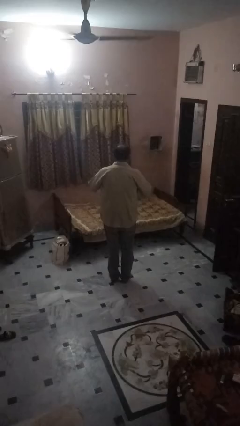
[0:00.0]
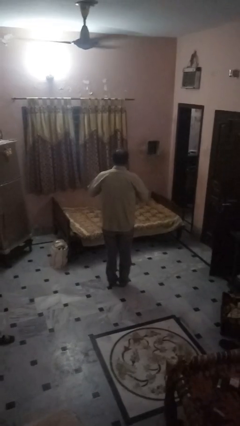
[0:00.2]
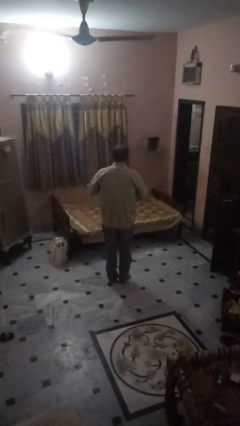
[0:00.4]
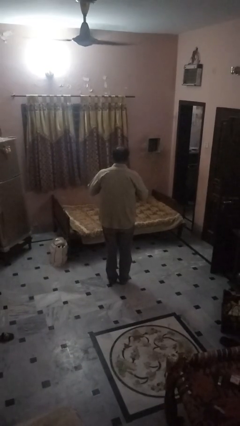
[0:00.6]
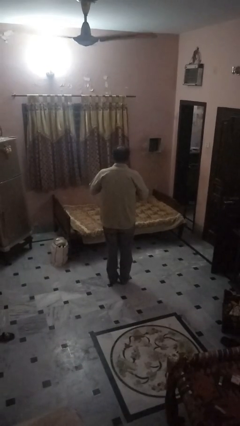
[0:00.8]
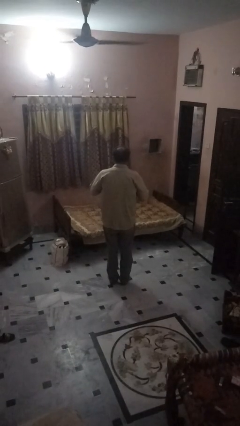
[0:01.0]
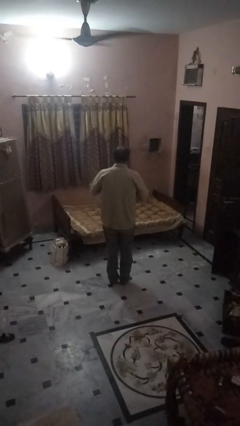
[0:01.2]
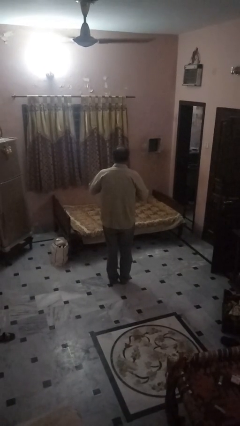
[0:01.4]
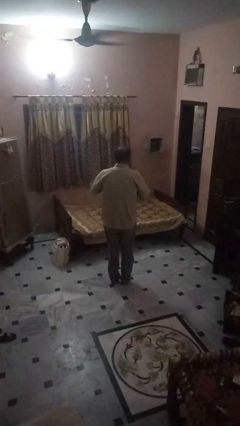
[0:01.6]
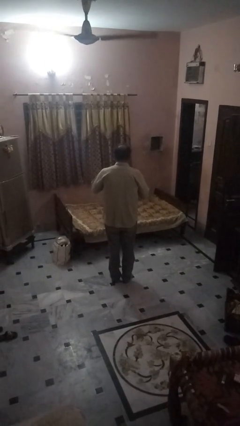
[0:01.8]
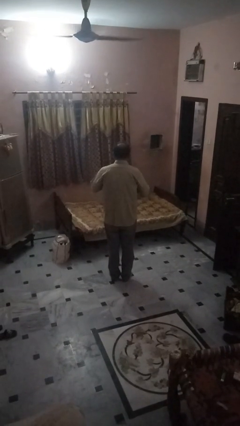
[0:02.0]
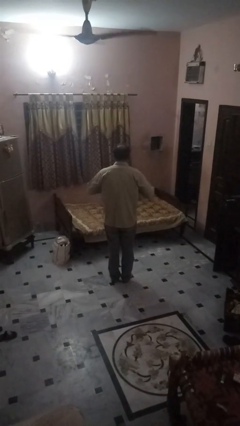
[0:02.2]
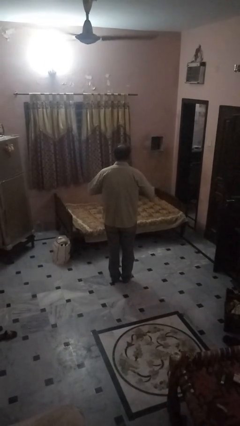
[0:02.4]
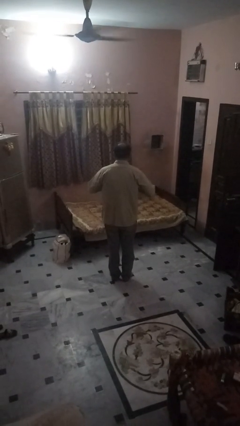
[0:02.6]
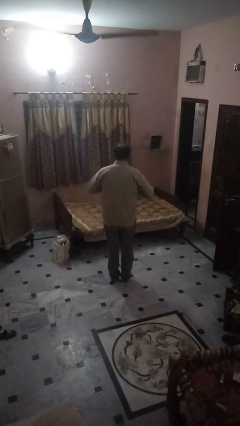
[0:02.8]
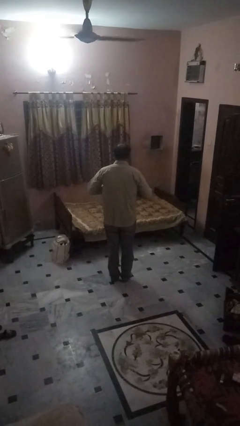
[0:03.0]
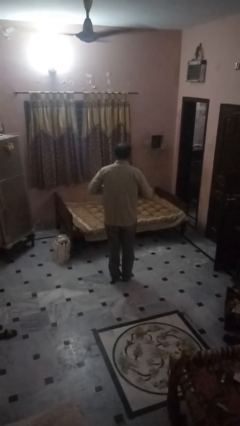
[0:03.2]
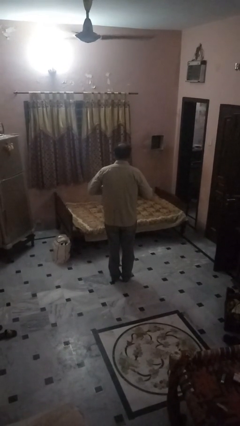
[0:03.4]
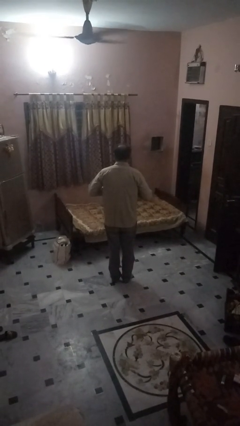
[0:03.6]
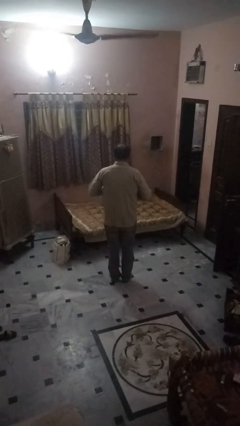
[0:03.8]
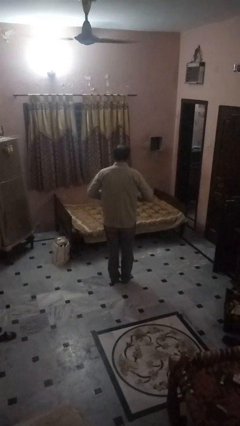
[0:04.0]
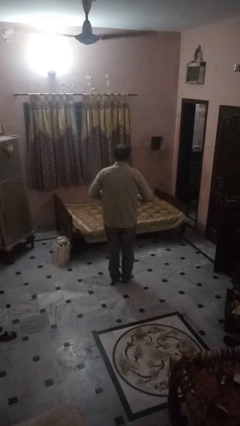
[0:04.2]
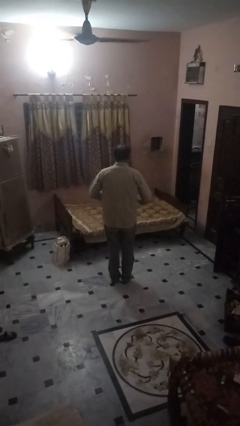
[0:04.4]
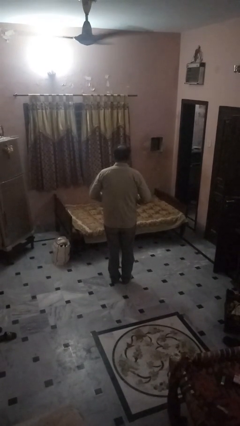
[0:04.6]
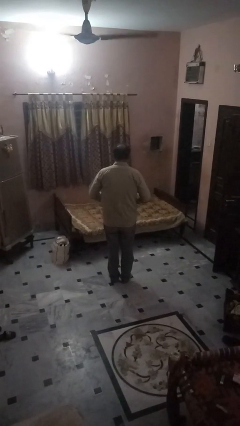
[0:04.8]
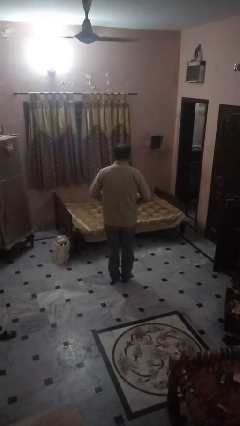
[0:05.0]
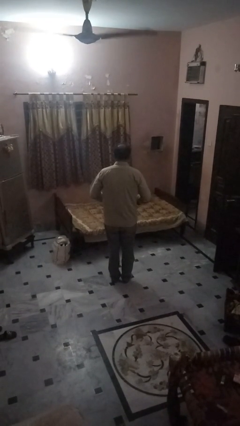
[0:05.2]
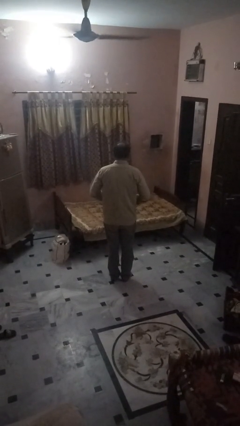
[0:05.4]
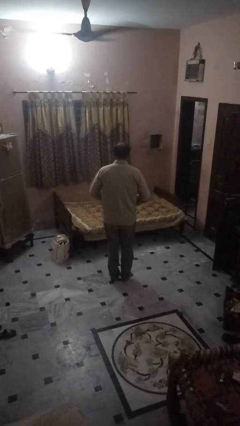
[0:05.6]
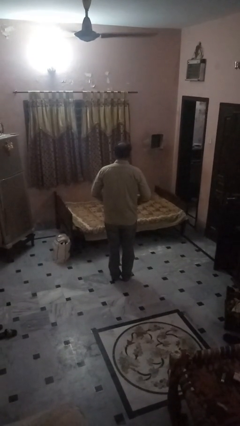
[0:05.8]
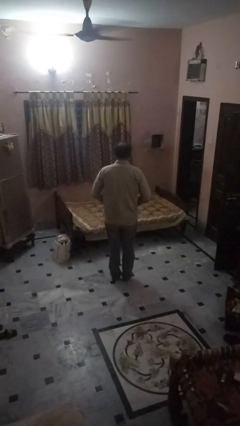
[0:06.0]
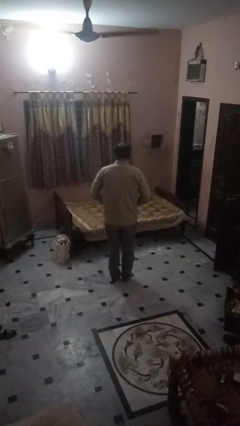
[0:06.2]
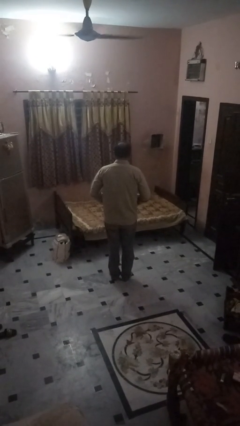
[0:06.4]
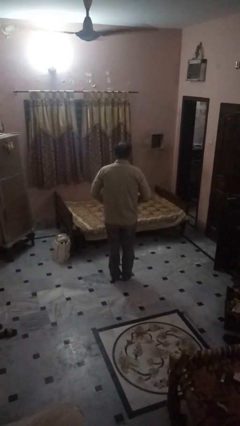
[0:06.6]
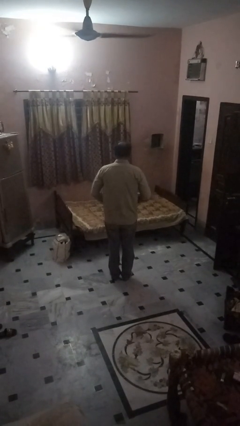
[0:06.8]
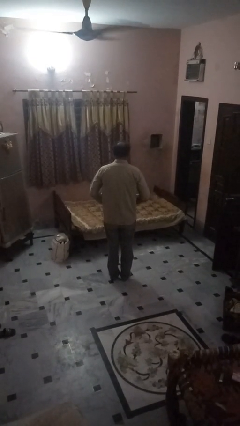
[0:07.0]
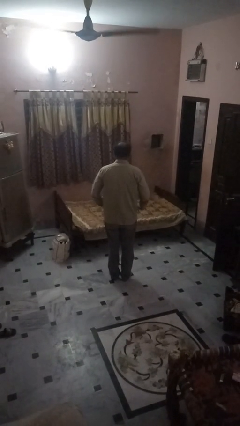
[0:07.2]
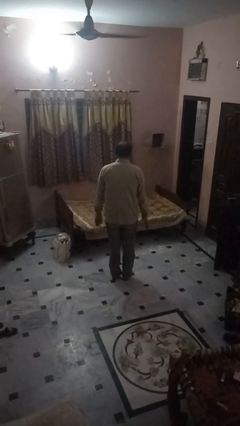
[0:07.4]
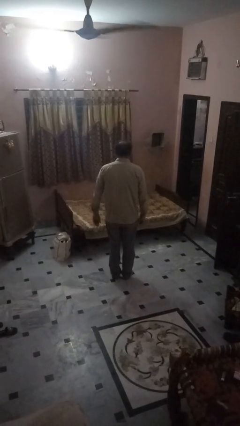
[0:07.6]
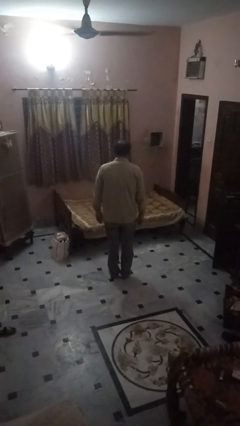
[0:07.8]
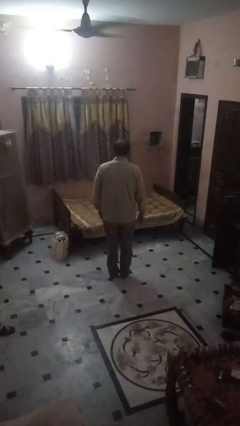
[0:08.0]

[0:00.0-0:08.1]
person buttons shirt

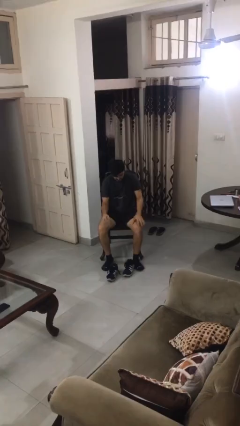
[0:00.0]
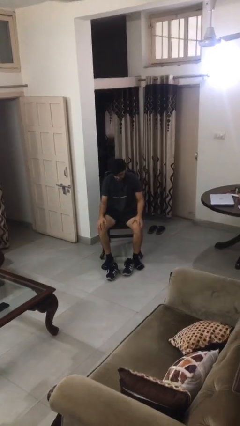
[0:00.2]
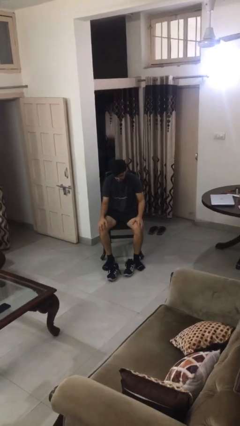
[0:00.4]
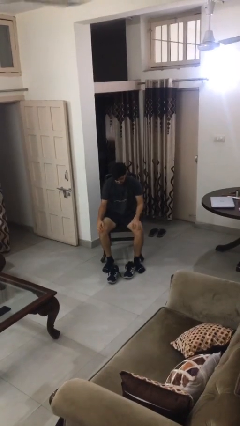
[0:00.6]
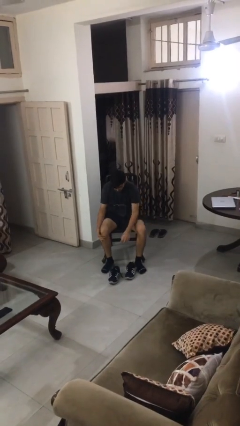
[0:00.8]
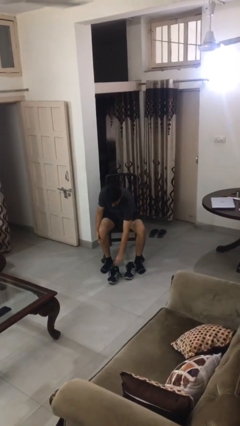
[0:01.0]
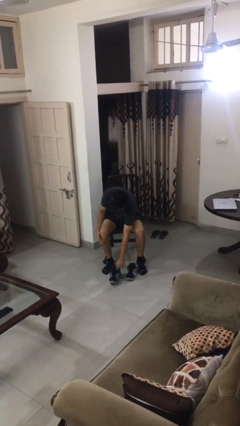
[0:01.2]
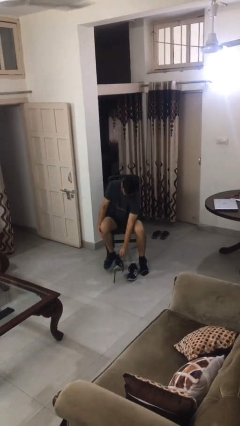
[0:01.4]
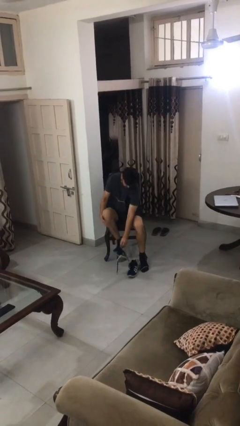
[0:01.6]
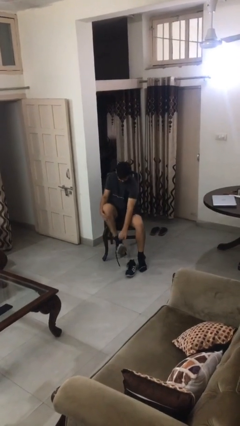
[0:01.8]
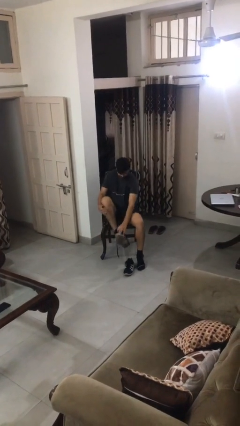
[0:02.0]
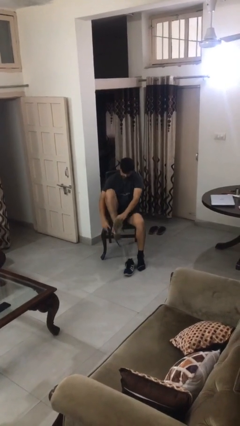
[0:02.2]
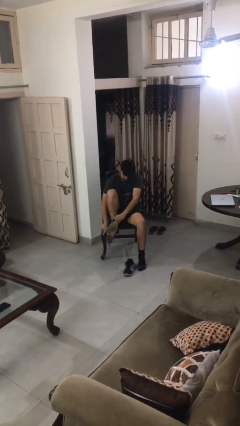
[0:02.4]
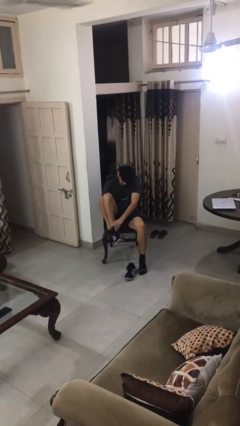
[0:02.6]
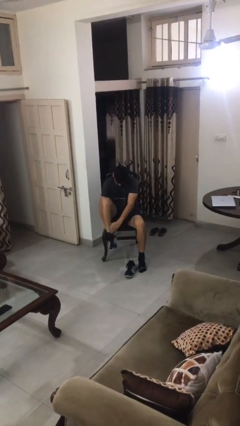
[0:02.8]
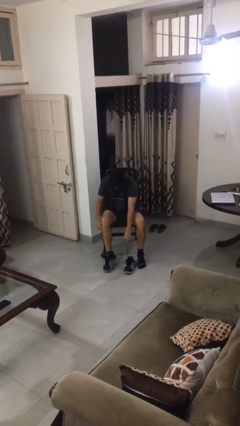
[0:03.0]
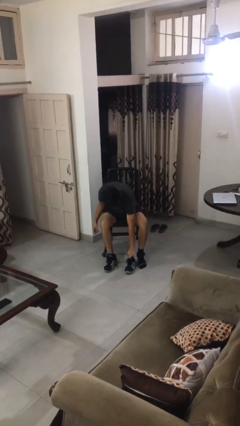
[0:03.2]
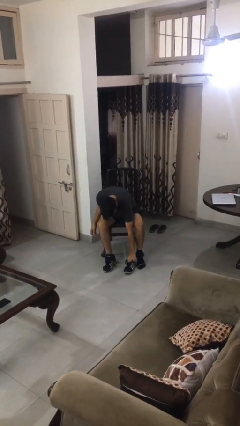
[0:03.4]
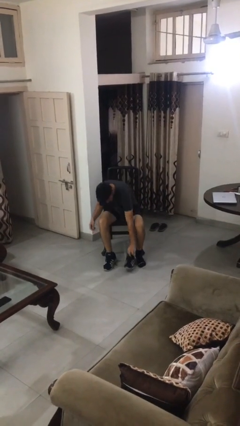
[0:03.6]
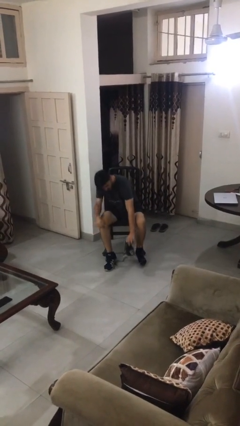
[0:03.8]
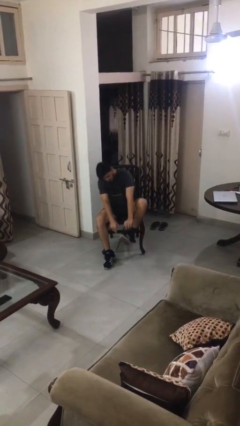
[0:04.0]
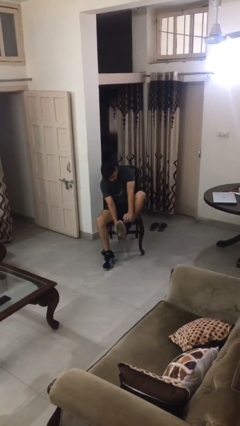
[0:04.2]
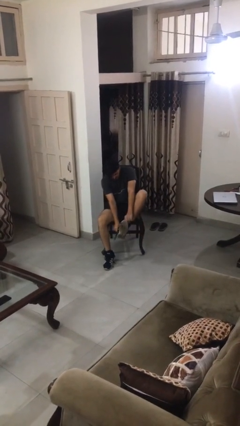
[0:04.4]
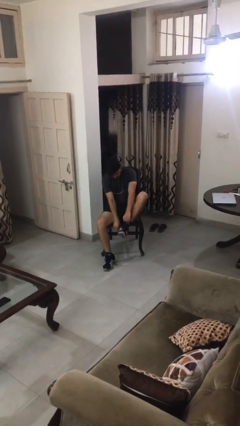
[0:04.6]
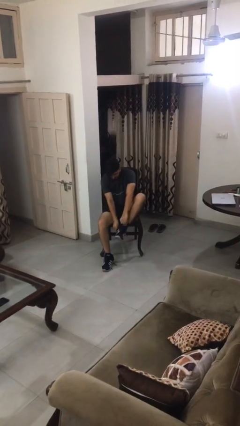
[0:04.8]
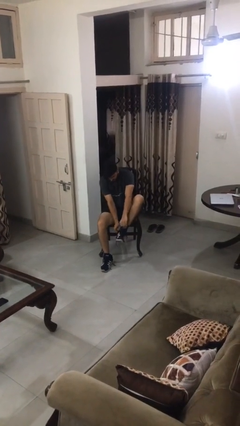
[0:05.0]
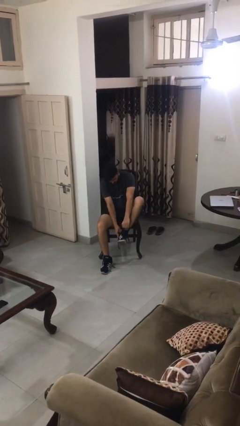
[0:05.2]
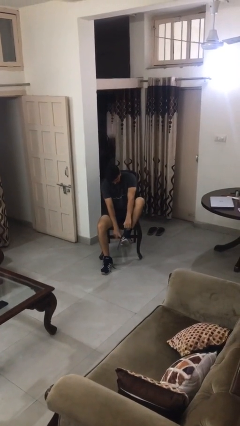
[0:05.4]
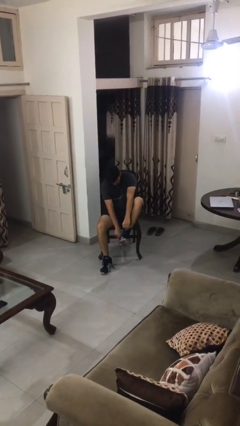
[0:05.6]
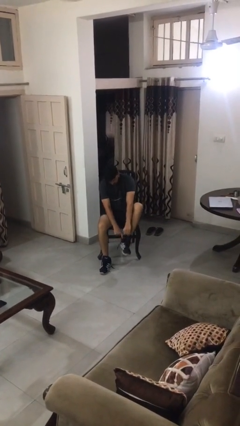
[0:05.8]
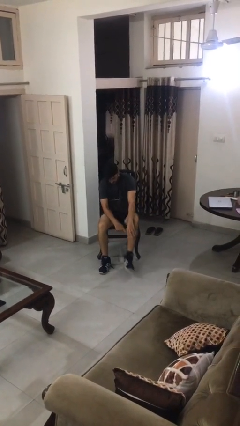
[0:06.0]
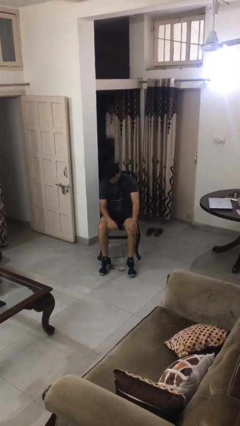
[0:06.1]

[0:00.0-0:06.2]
person puts on shoes

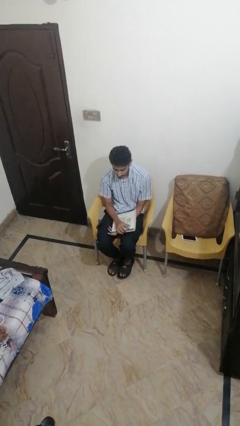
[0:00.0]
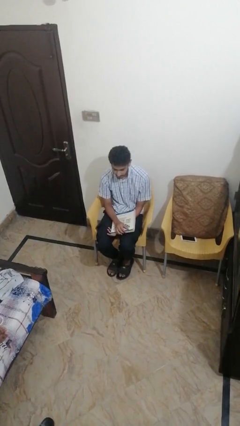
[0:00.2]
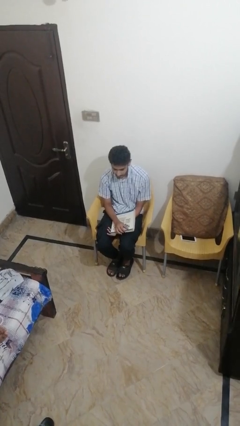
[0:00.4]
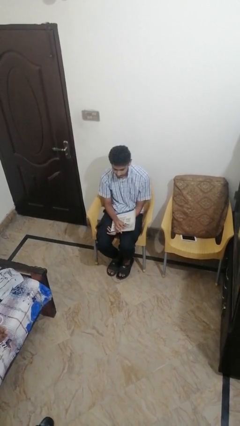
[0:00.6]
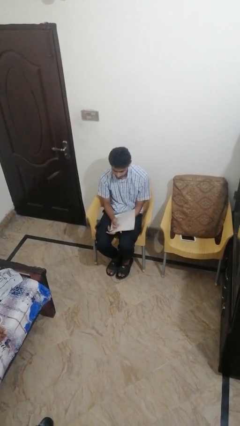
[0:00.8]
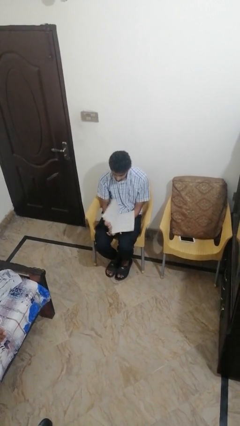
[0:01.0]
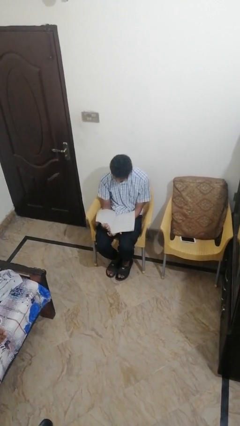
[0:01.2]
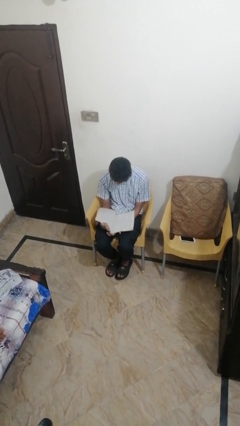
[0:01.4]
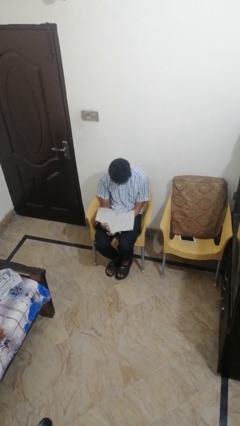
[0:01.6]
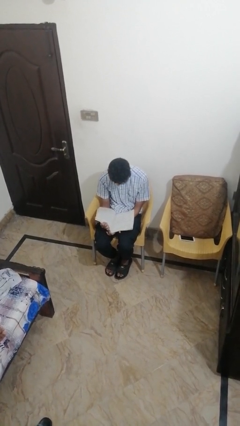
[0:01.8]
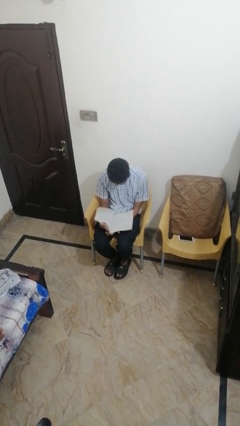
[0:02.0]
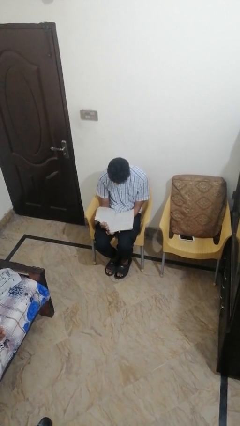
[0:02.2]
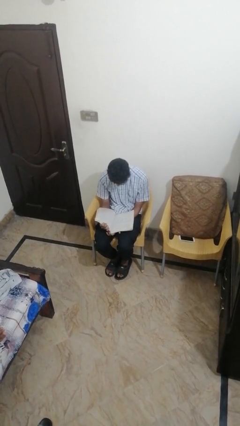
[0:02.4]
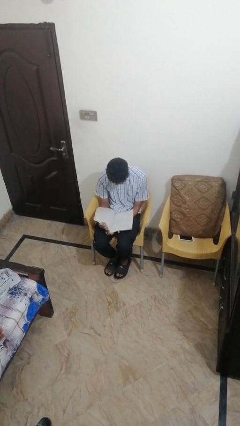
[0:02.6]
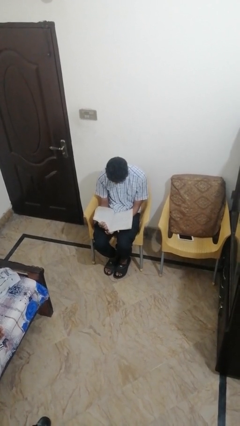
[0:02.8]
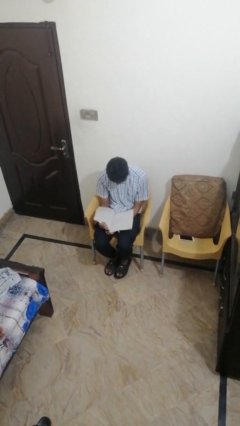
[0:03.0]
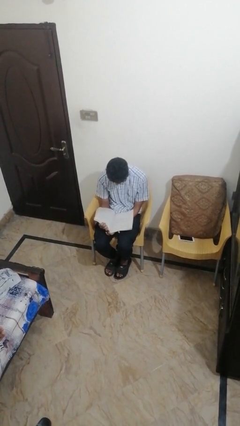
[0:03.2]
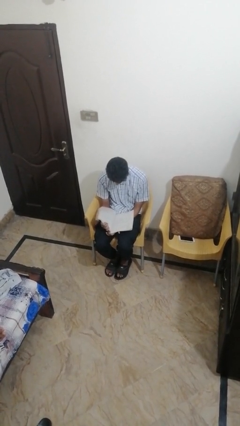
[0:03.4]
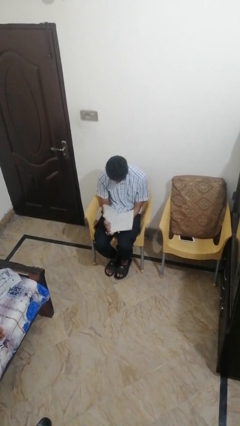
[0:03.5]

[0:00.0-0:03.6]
person reads magazine
